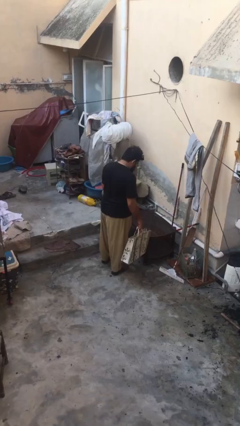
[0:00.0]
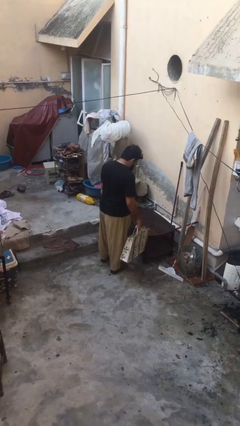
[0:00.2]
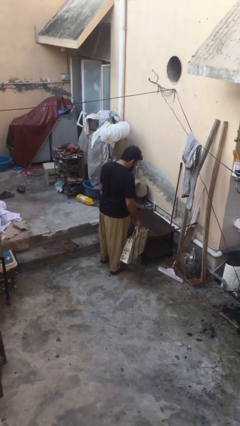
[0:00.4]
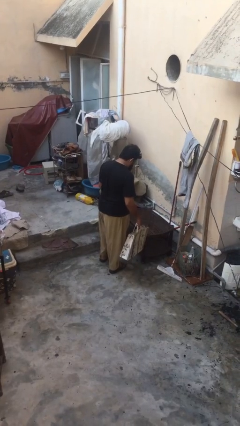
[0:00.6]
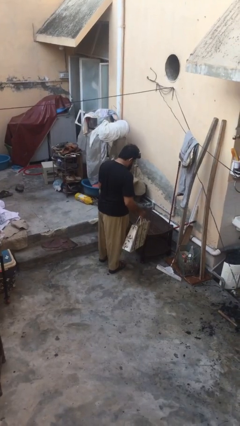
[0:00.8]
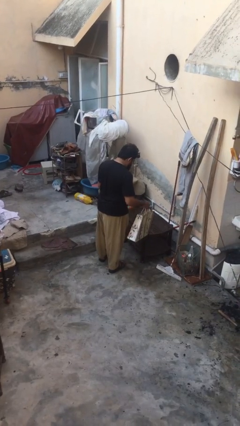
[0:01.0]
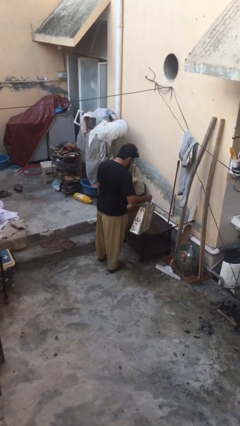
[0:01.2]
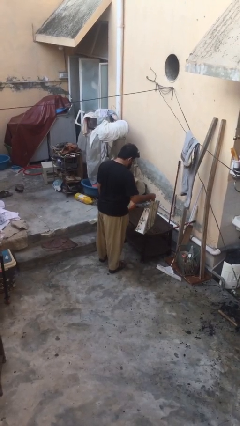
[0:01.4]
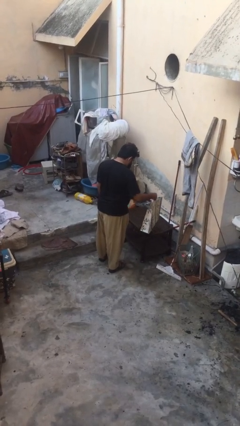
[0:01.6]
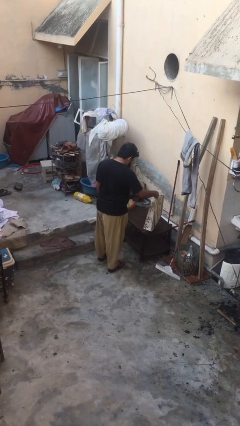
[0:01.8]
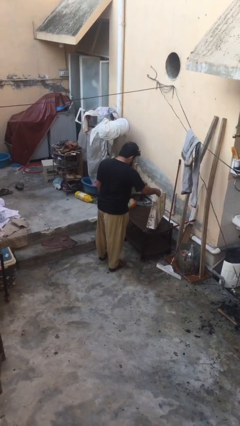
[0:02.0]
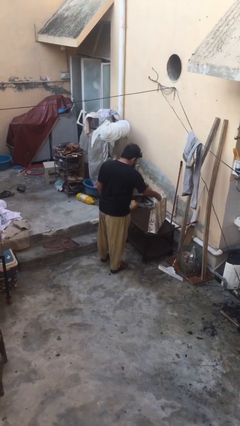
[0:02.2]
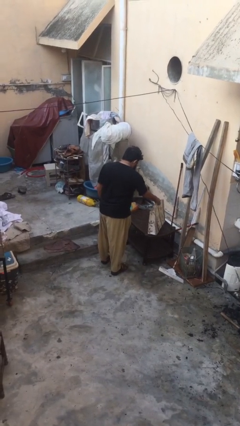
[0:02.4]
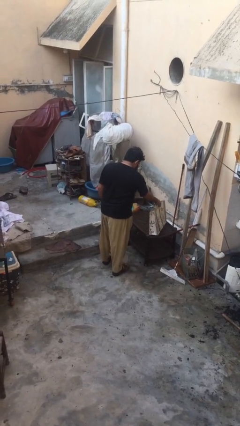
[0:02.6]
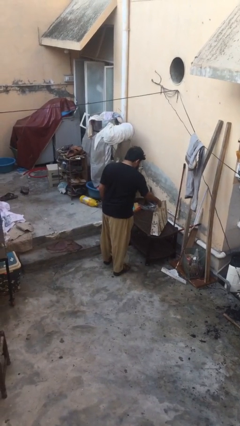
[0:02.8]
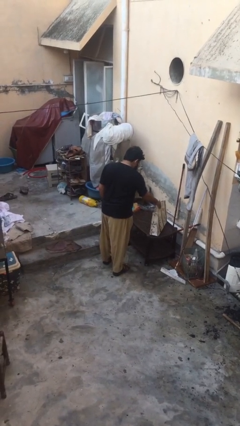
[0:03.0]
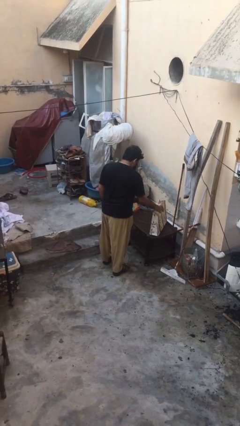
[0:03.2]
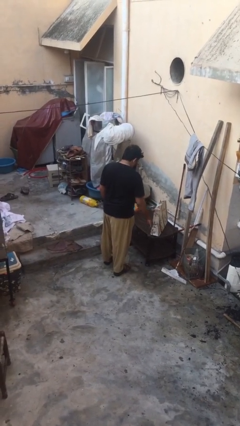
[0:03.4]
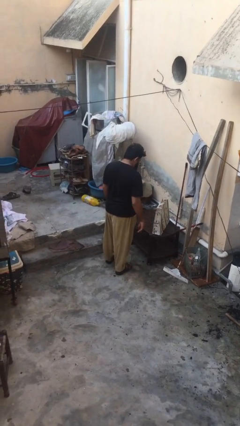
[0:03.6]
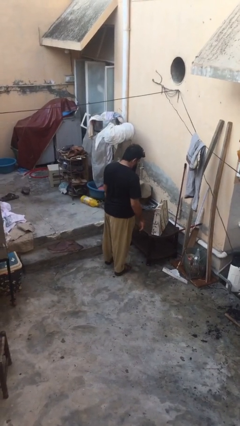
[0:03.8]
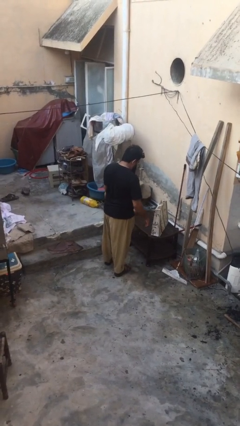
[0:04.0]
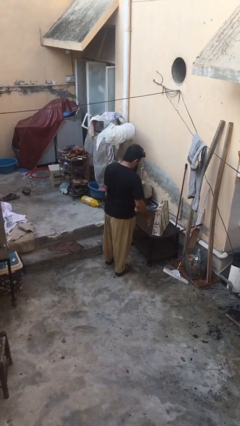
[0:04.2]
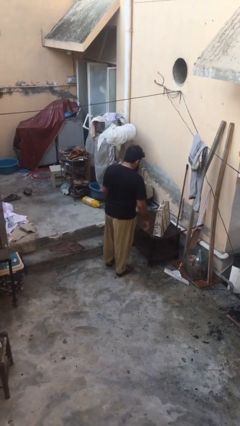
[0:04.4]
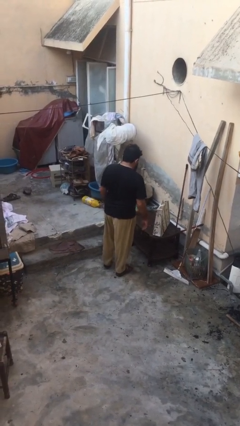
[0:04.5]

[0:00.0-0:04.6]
person puts down object on table

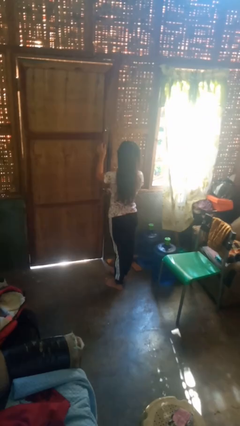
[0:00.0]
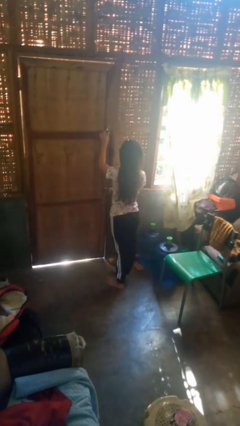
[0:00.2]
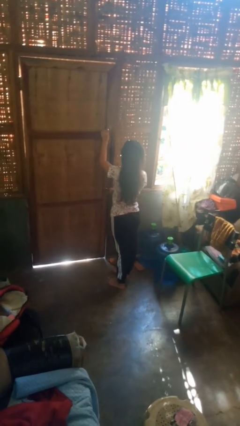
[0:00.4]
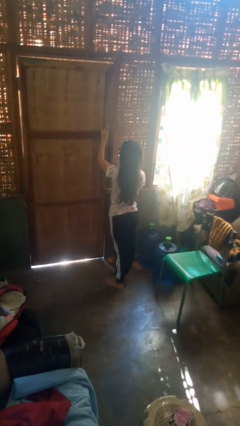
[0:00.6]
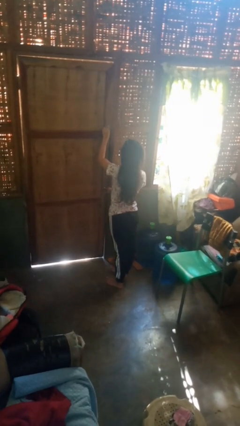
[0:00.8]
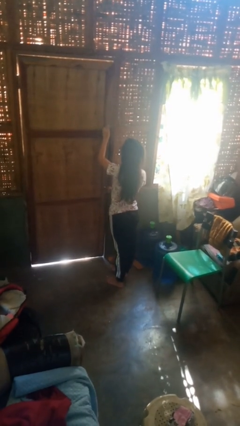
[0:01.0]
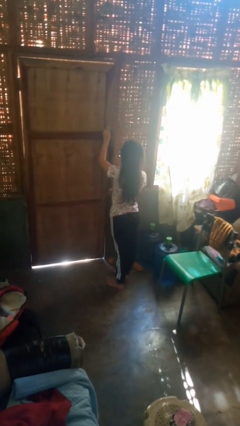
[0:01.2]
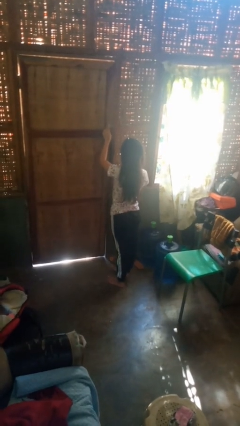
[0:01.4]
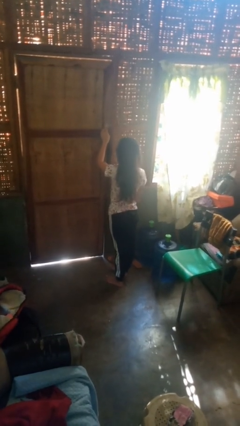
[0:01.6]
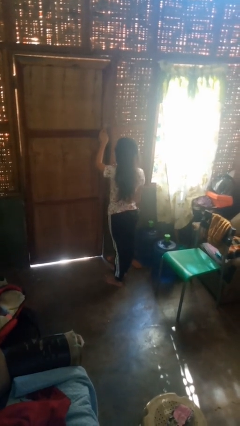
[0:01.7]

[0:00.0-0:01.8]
person locks door with keys

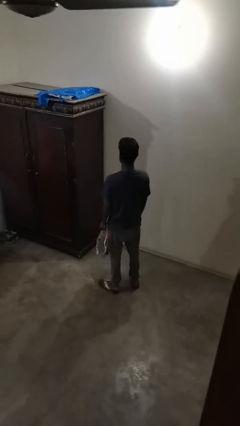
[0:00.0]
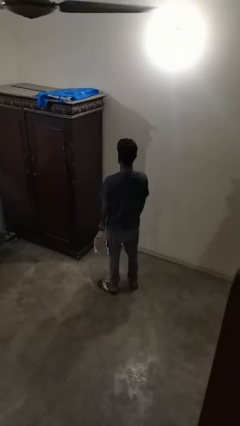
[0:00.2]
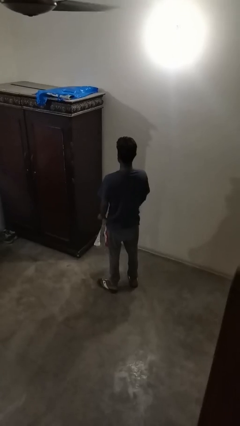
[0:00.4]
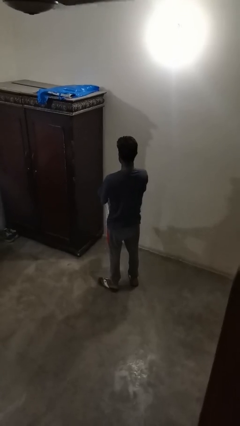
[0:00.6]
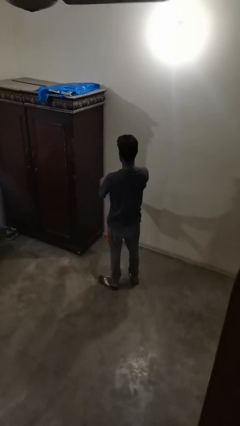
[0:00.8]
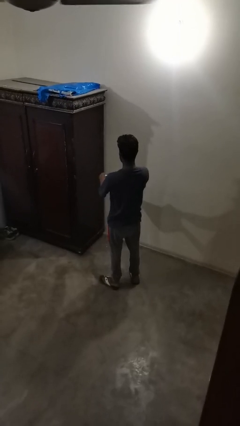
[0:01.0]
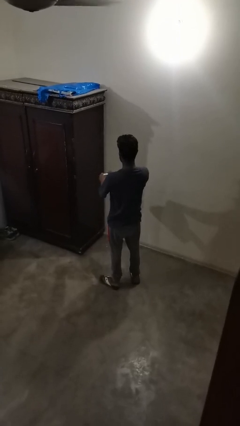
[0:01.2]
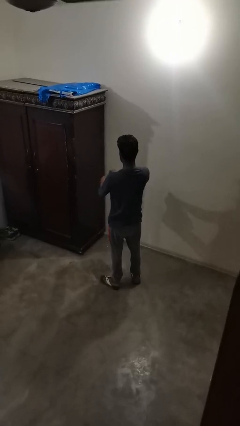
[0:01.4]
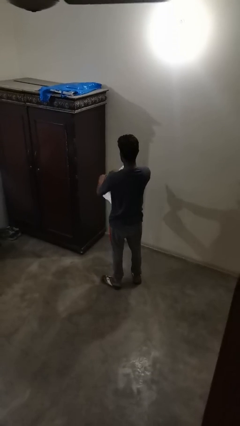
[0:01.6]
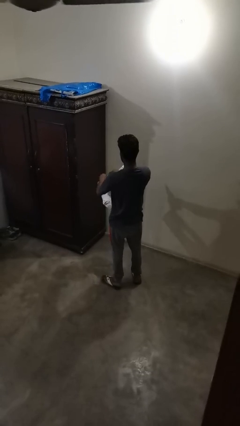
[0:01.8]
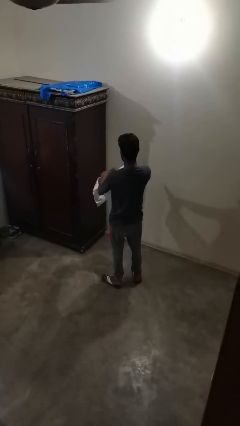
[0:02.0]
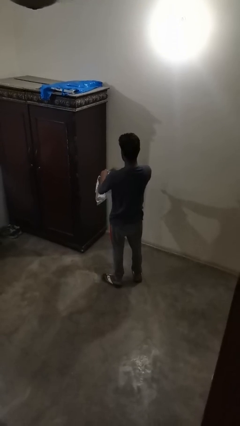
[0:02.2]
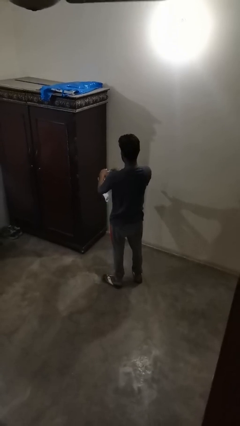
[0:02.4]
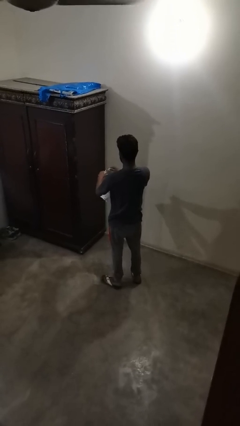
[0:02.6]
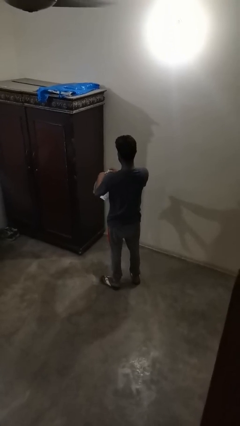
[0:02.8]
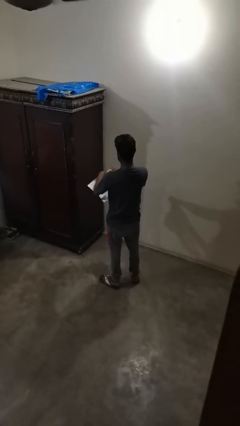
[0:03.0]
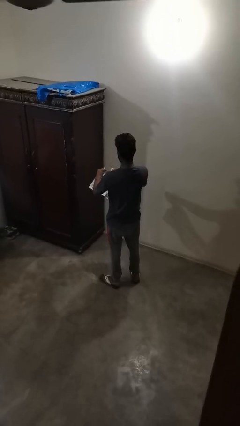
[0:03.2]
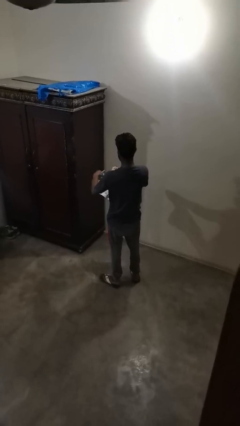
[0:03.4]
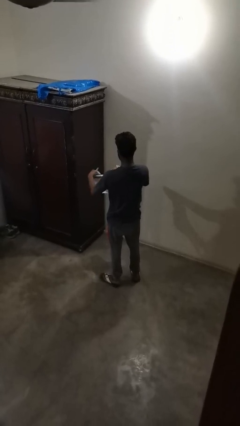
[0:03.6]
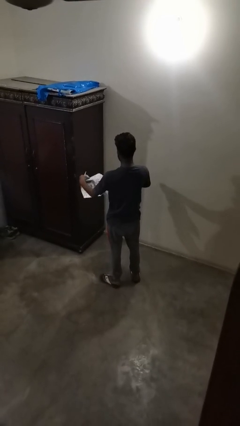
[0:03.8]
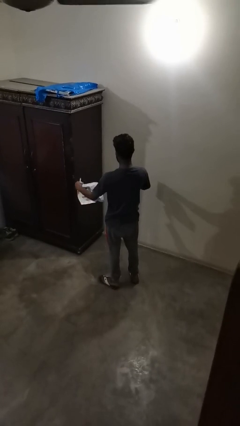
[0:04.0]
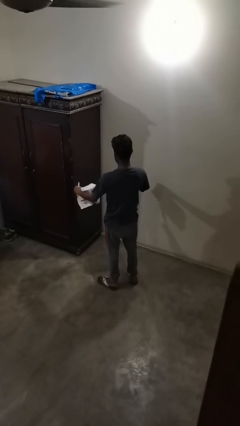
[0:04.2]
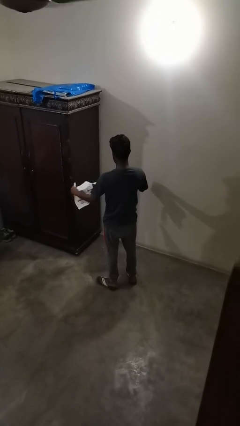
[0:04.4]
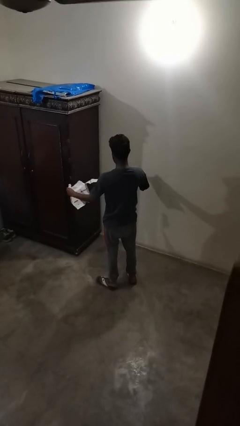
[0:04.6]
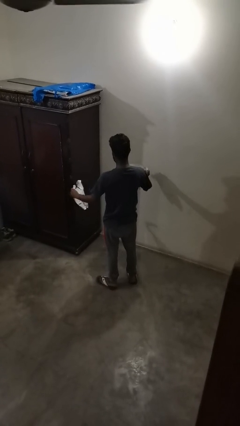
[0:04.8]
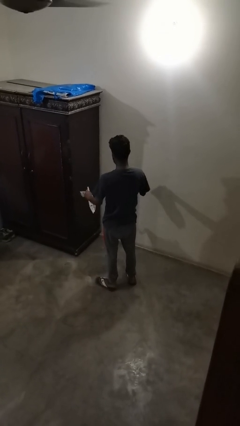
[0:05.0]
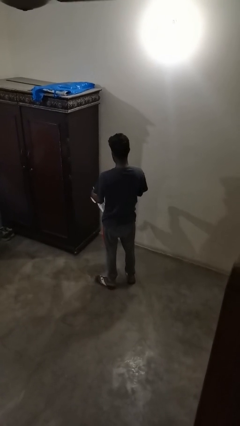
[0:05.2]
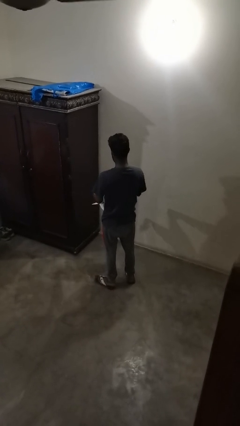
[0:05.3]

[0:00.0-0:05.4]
person tears paper

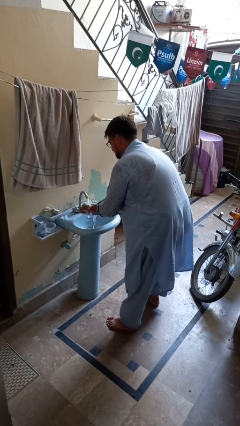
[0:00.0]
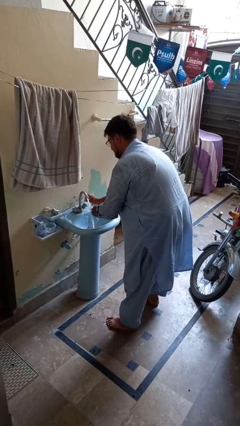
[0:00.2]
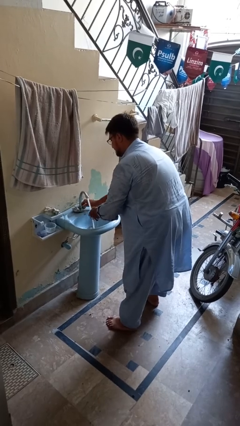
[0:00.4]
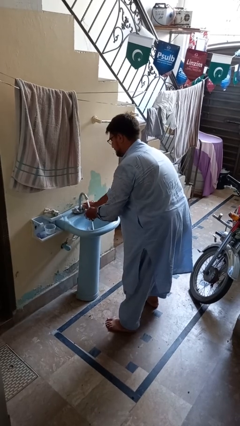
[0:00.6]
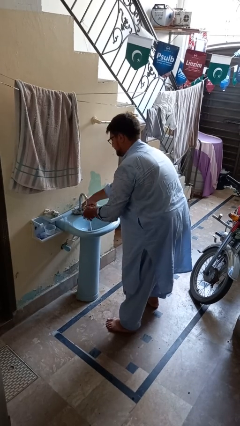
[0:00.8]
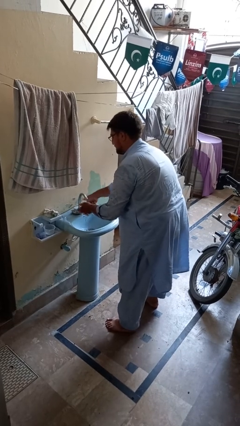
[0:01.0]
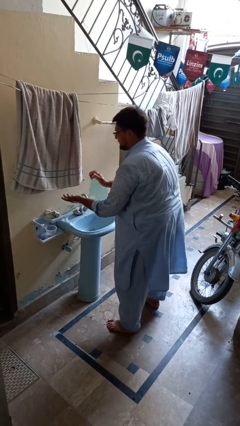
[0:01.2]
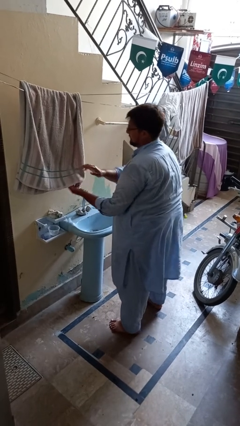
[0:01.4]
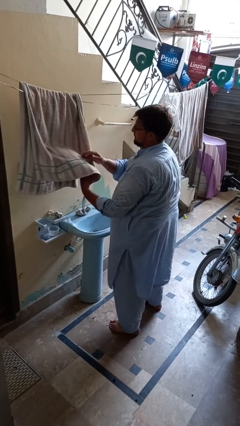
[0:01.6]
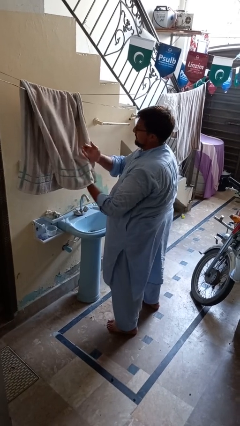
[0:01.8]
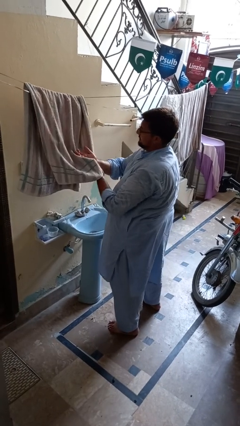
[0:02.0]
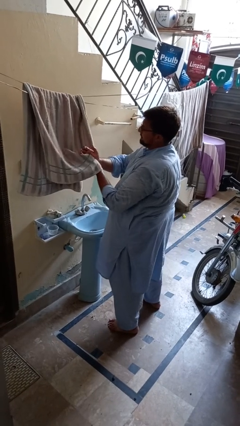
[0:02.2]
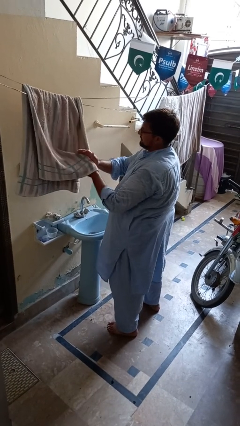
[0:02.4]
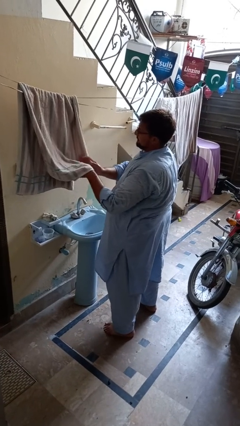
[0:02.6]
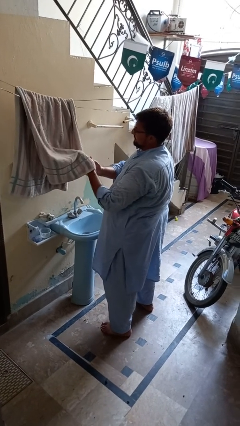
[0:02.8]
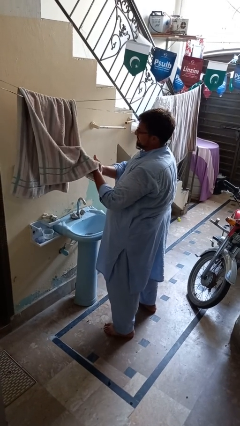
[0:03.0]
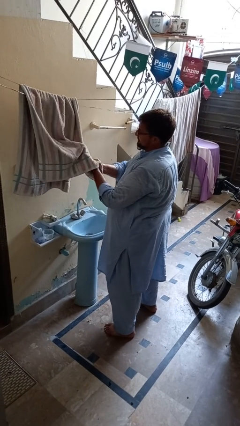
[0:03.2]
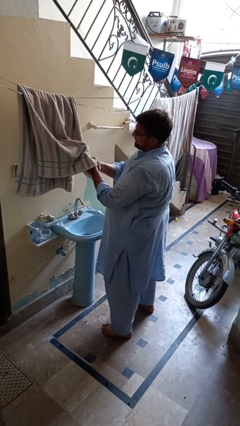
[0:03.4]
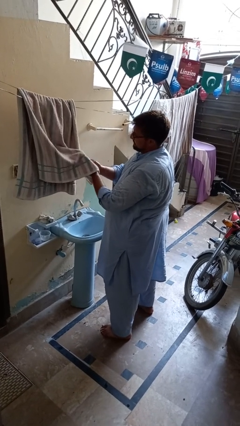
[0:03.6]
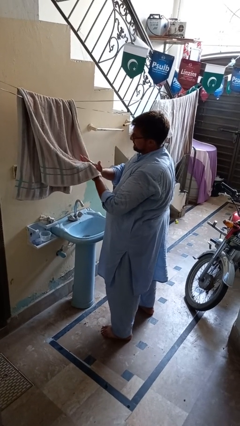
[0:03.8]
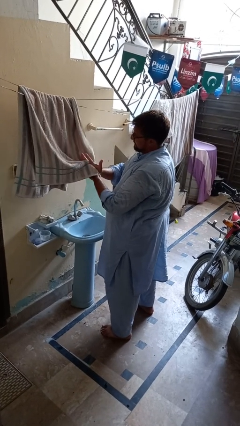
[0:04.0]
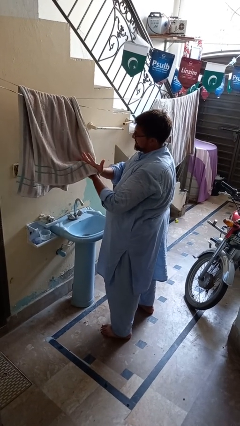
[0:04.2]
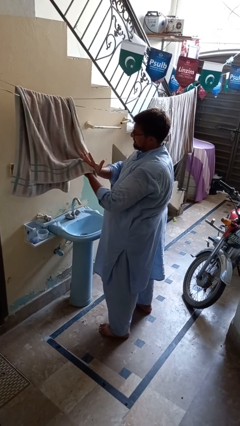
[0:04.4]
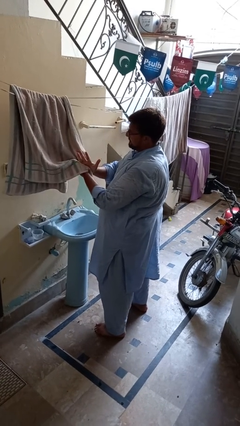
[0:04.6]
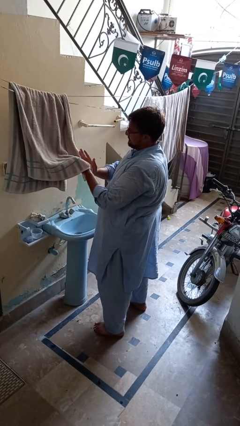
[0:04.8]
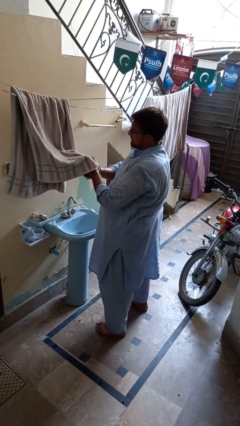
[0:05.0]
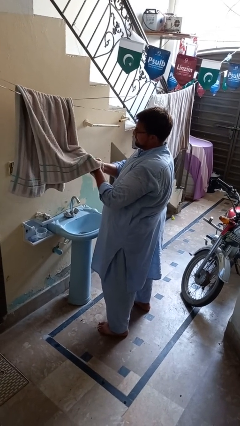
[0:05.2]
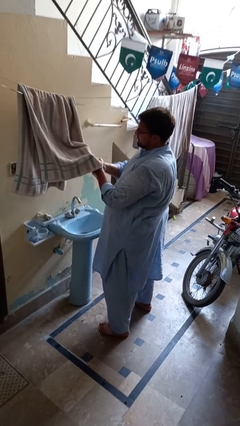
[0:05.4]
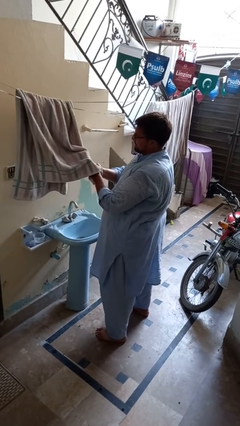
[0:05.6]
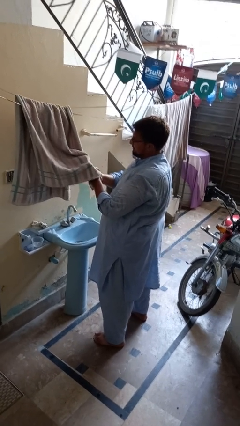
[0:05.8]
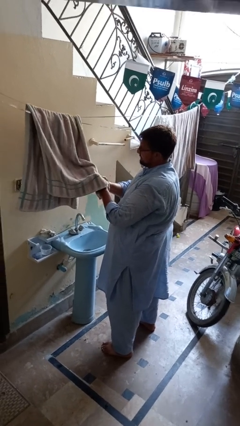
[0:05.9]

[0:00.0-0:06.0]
person dries hands with towel
